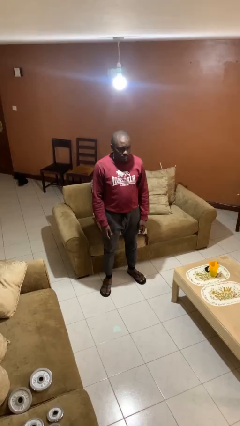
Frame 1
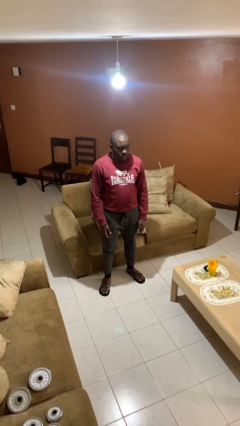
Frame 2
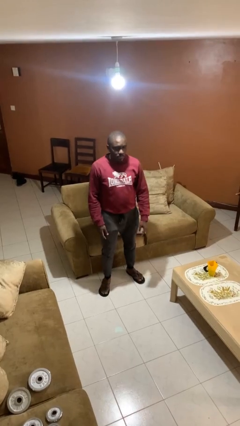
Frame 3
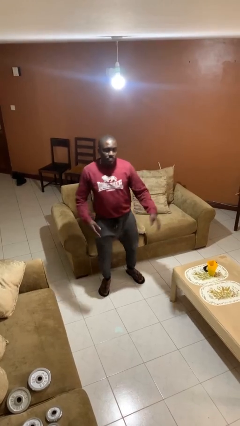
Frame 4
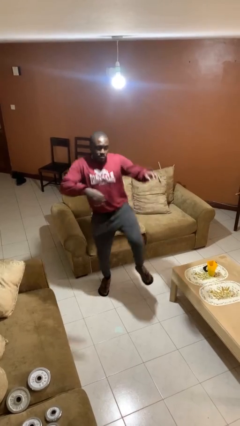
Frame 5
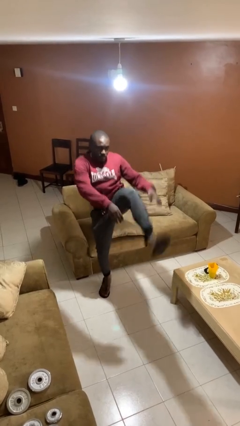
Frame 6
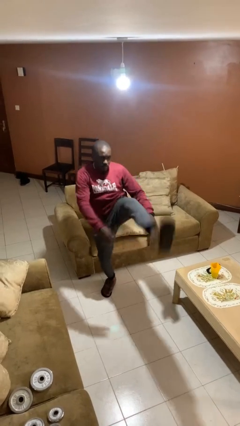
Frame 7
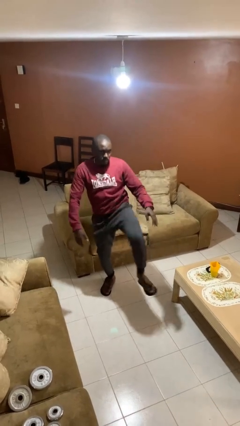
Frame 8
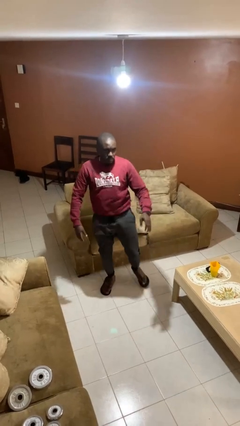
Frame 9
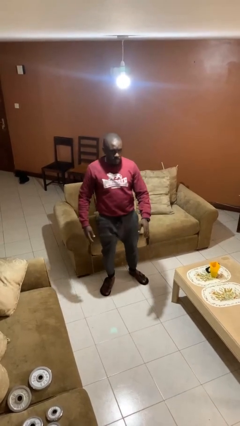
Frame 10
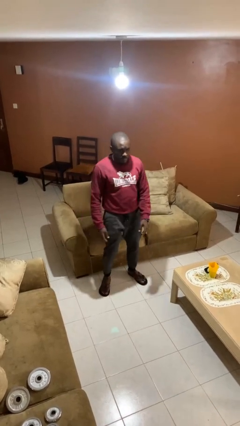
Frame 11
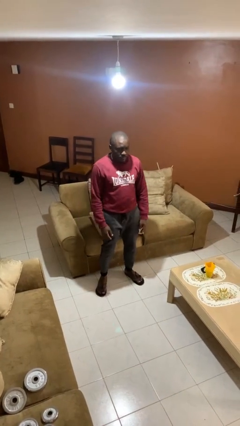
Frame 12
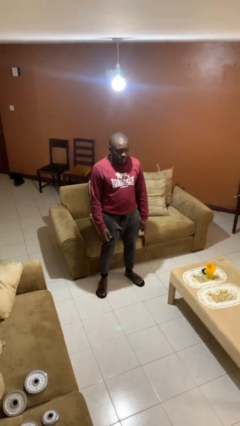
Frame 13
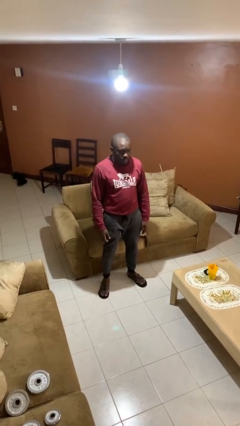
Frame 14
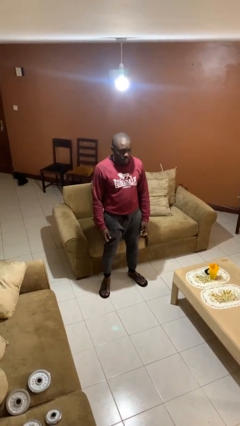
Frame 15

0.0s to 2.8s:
person karate kicks

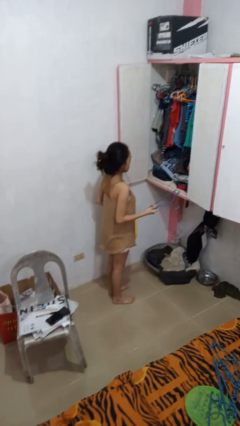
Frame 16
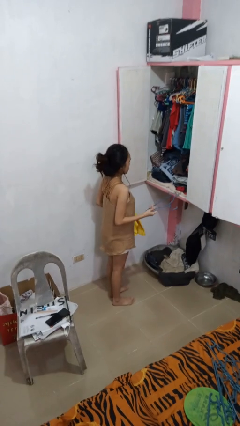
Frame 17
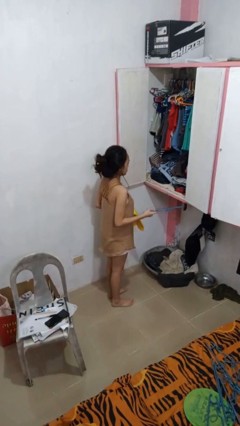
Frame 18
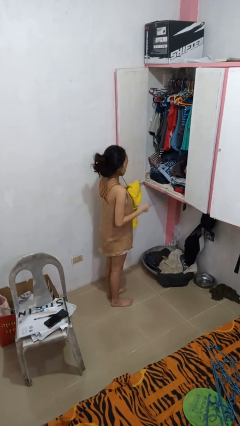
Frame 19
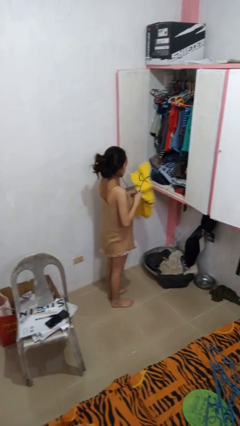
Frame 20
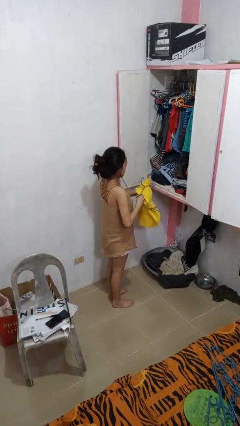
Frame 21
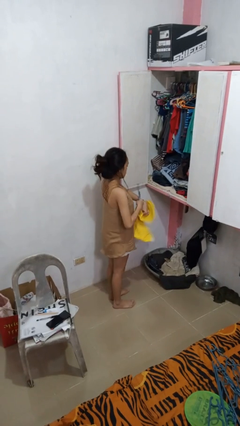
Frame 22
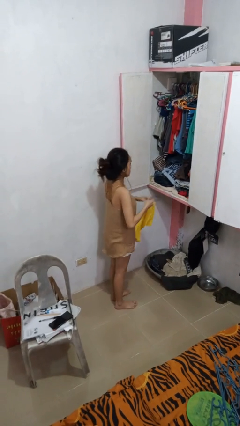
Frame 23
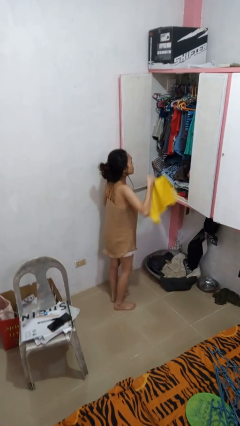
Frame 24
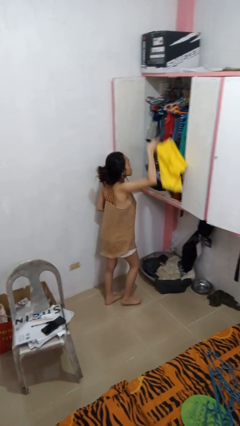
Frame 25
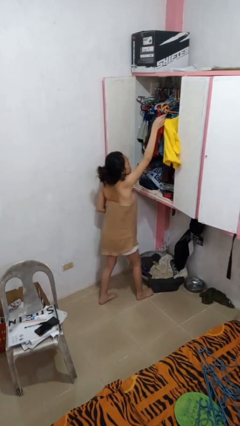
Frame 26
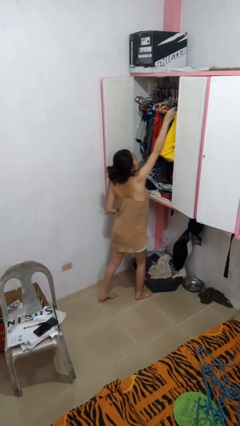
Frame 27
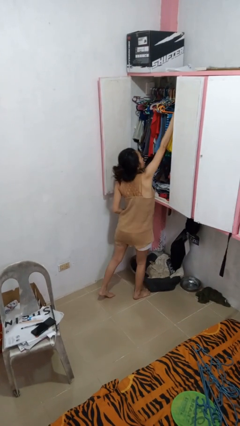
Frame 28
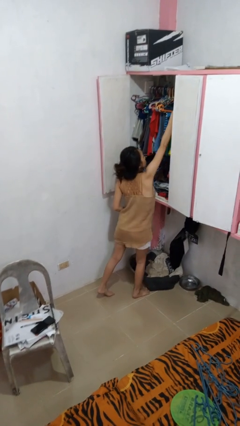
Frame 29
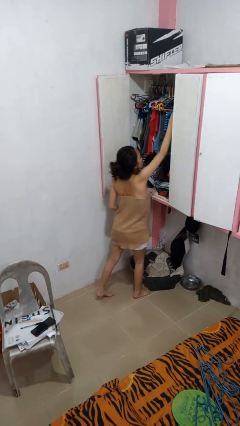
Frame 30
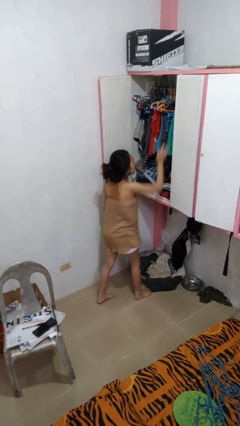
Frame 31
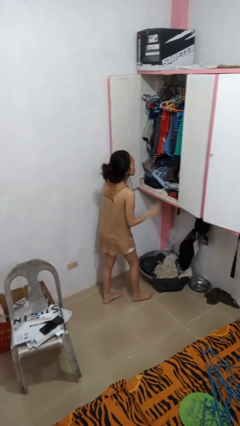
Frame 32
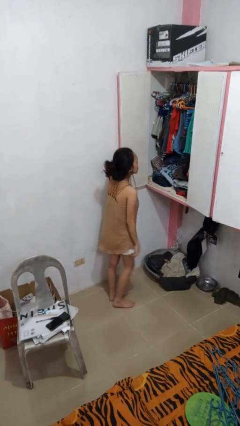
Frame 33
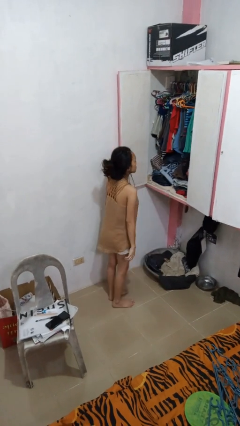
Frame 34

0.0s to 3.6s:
person puts clothes into closet

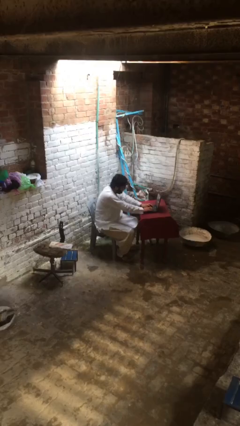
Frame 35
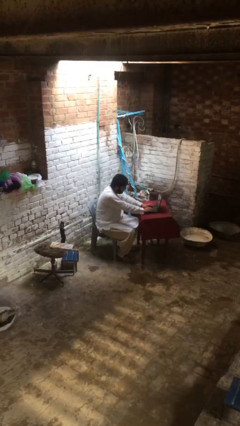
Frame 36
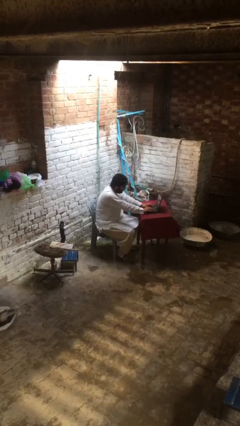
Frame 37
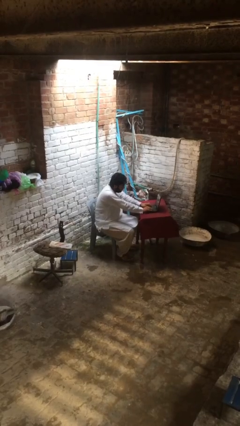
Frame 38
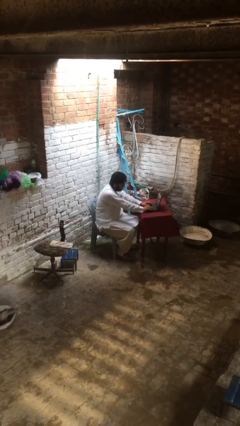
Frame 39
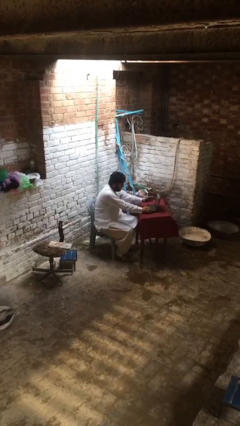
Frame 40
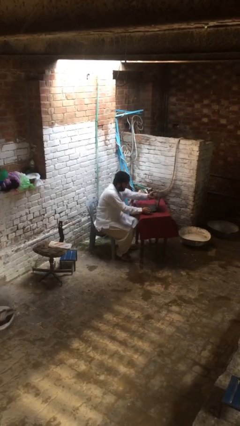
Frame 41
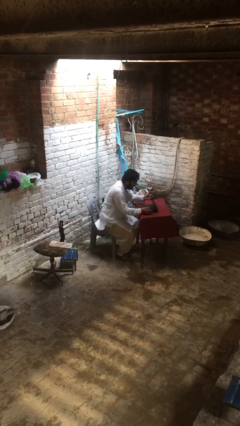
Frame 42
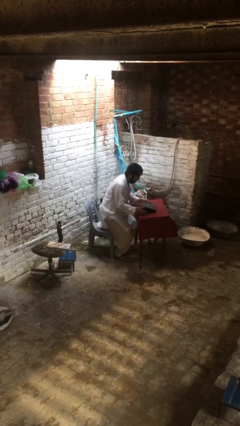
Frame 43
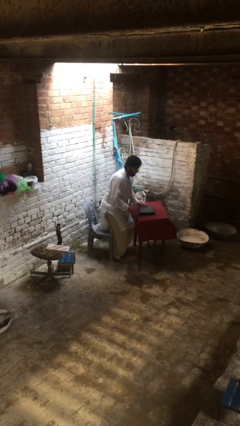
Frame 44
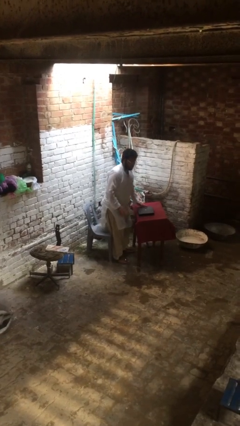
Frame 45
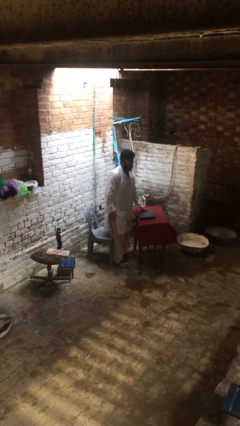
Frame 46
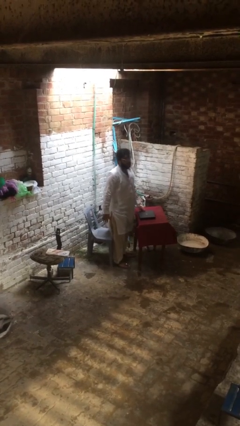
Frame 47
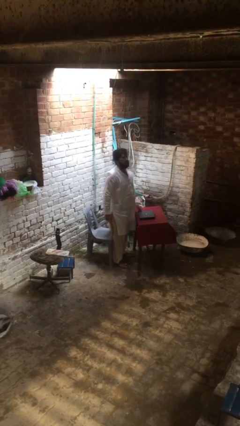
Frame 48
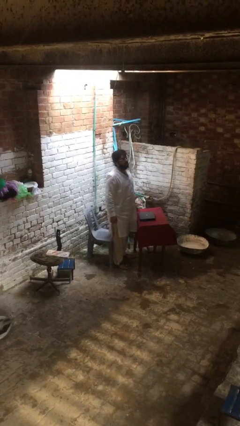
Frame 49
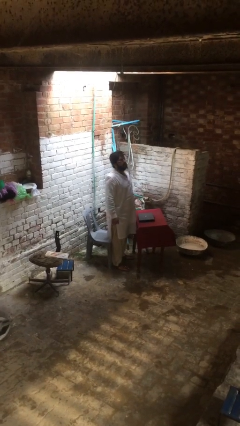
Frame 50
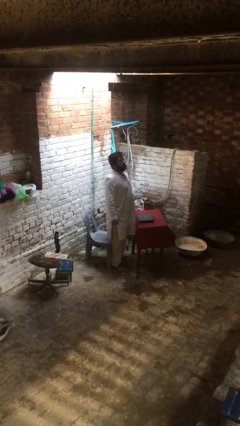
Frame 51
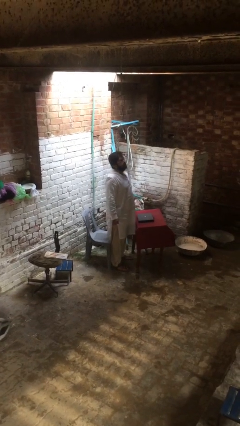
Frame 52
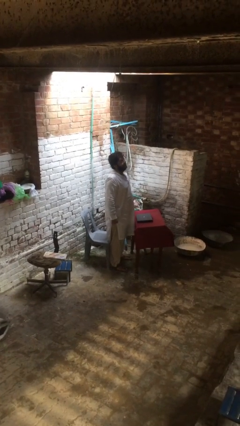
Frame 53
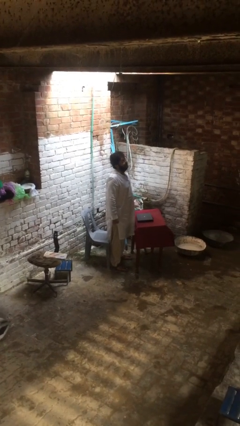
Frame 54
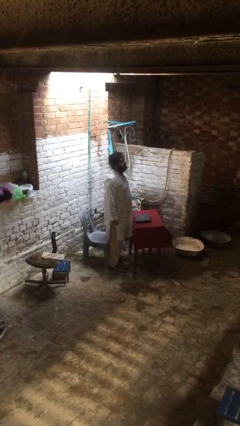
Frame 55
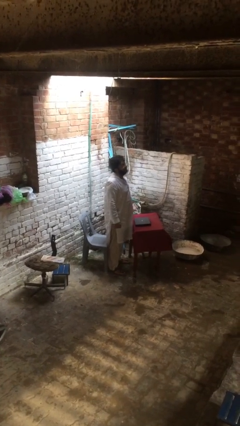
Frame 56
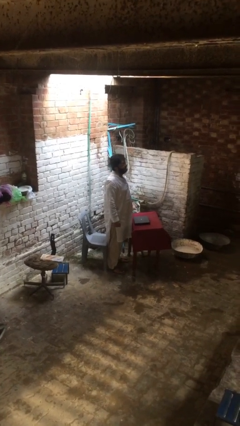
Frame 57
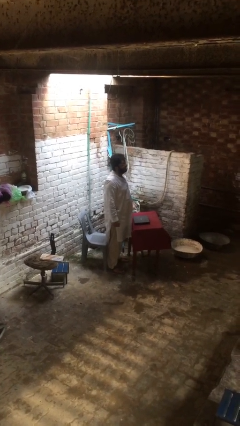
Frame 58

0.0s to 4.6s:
person stands up

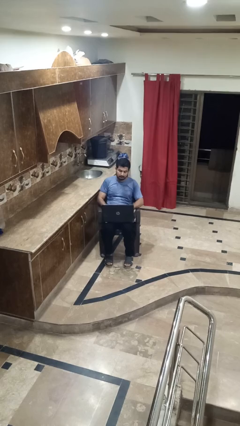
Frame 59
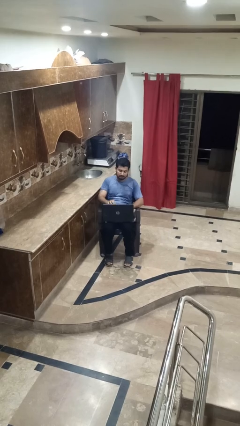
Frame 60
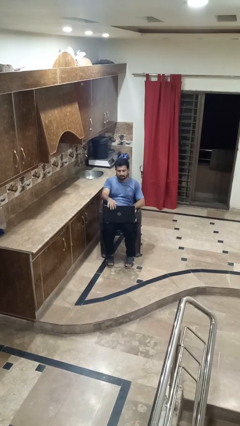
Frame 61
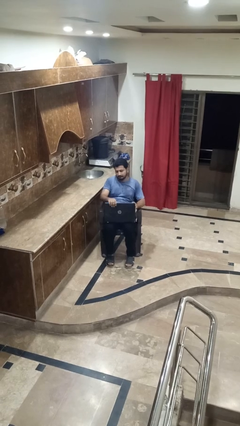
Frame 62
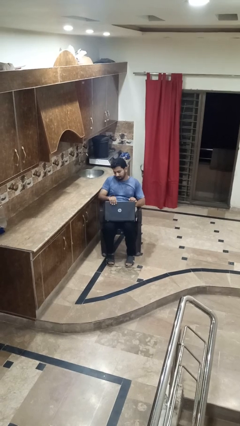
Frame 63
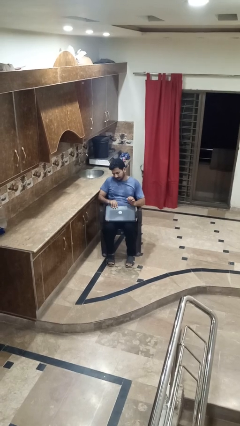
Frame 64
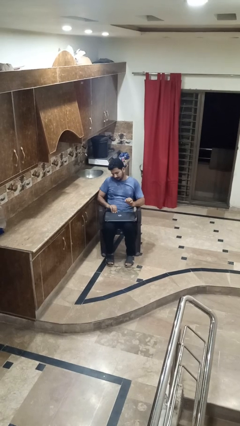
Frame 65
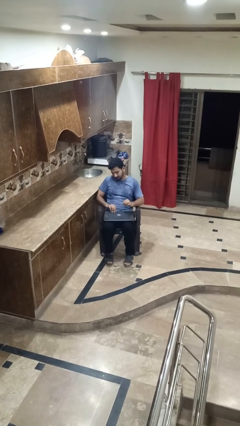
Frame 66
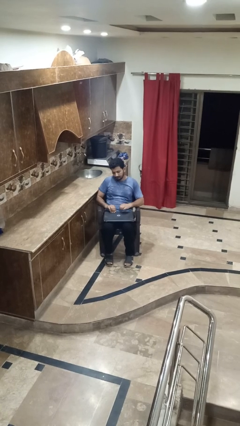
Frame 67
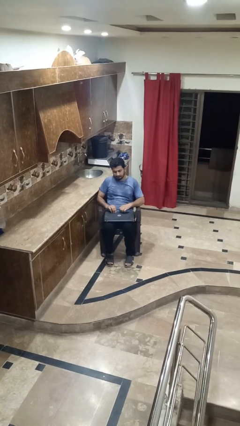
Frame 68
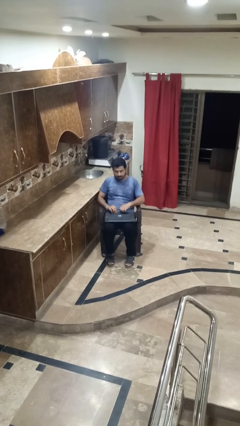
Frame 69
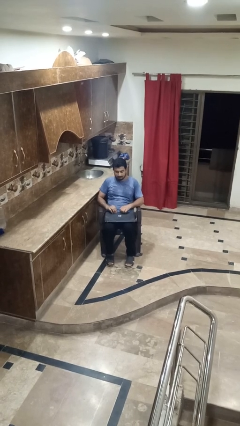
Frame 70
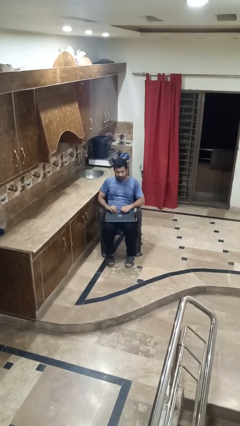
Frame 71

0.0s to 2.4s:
person closes laptop

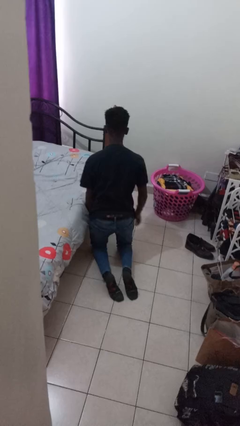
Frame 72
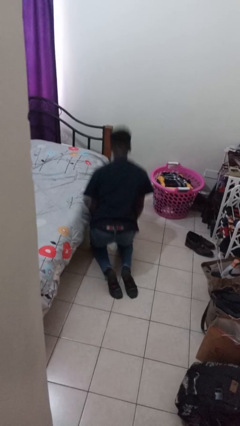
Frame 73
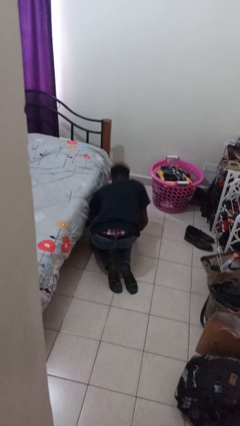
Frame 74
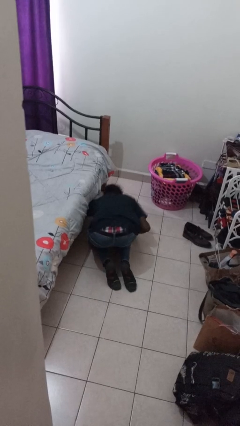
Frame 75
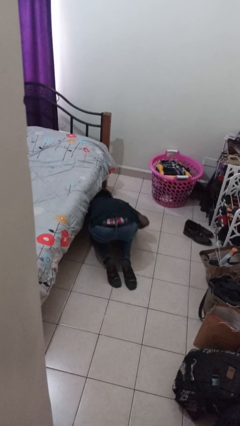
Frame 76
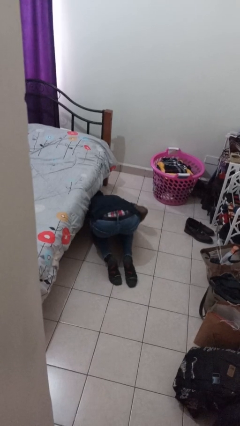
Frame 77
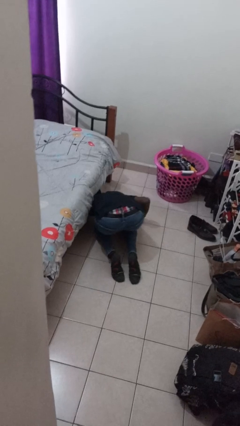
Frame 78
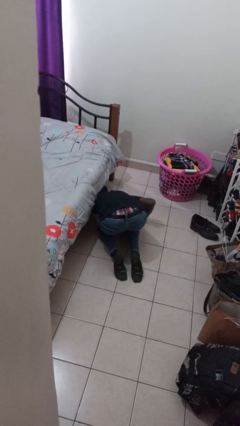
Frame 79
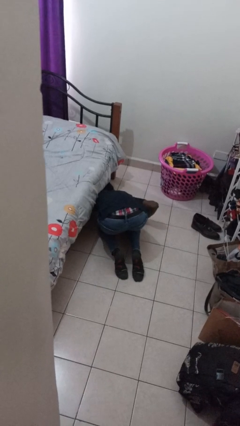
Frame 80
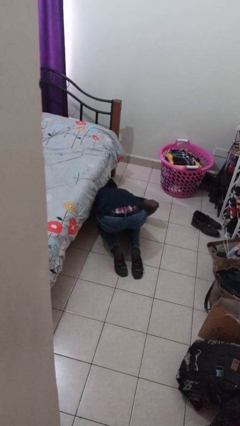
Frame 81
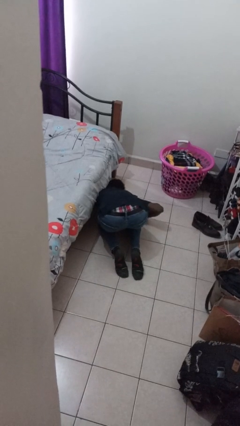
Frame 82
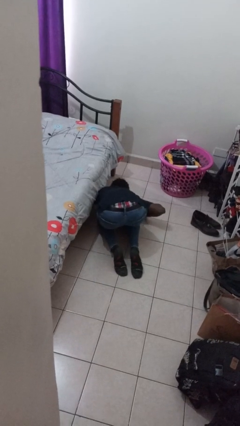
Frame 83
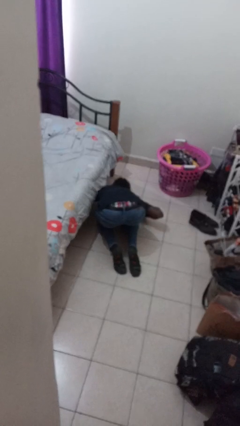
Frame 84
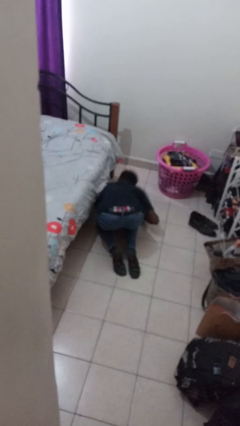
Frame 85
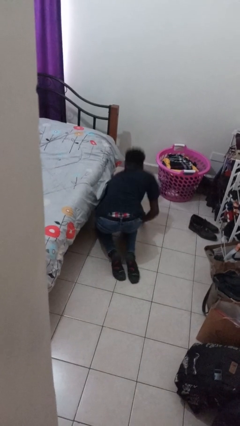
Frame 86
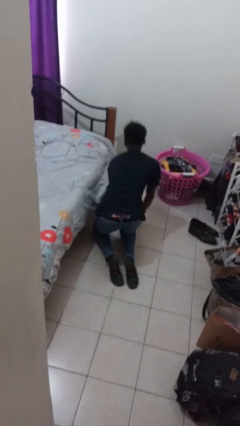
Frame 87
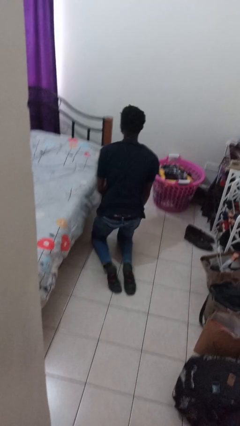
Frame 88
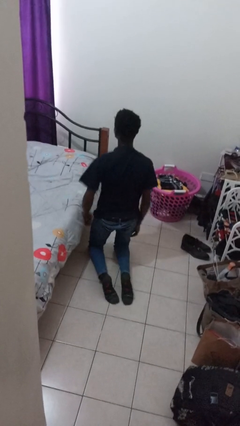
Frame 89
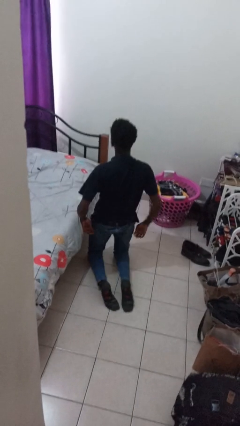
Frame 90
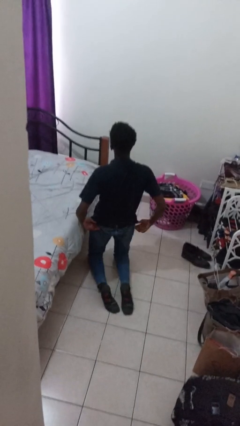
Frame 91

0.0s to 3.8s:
person searches under bed

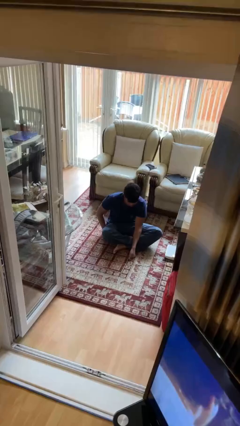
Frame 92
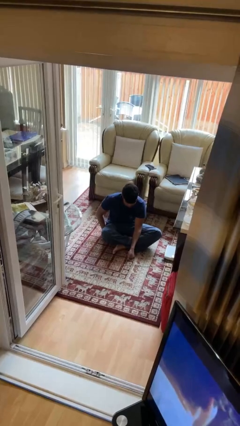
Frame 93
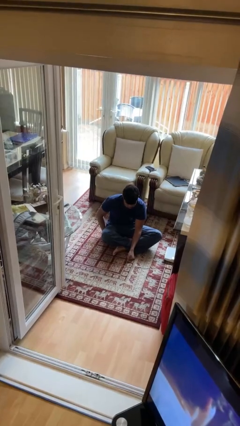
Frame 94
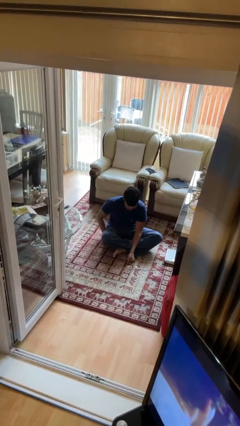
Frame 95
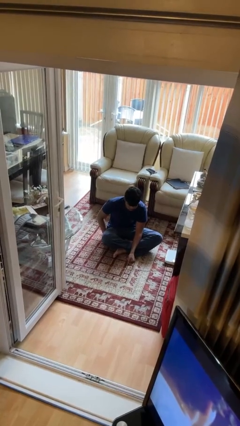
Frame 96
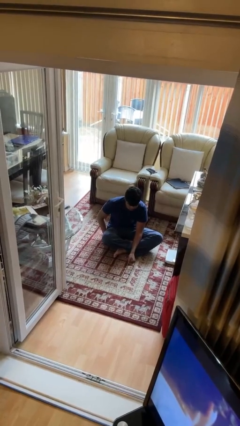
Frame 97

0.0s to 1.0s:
person sits crisscross
